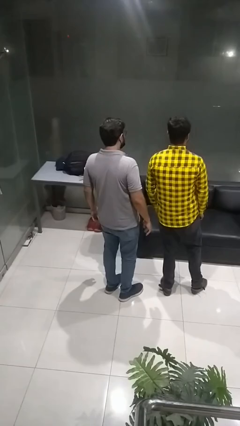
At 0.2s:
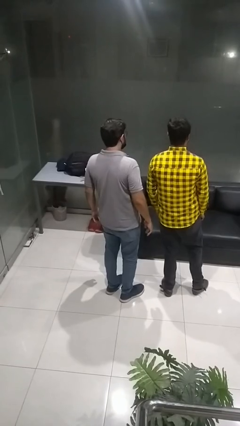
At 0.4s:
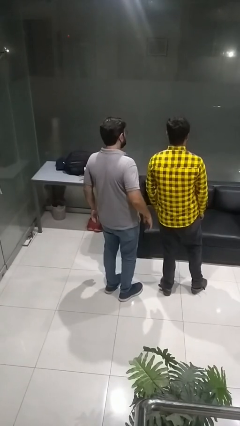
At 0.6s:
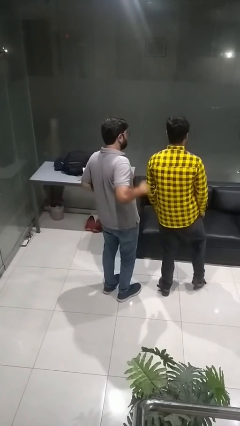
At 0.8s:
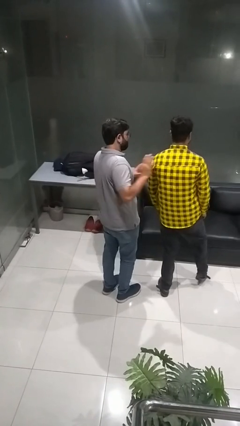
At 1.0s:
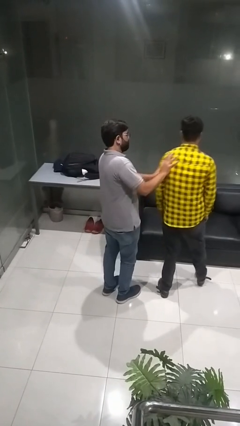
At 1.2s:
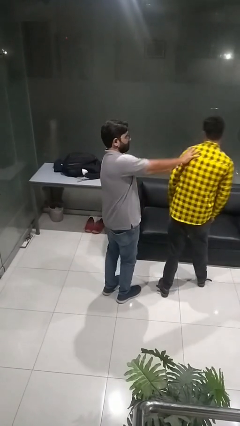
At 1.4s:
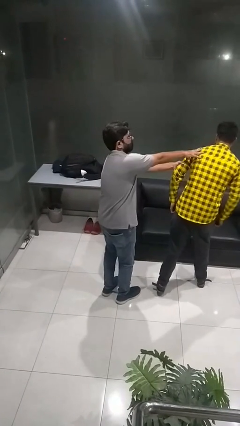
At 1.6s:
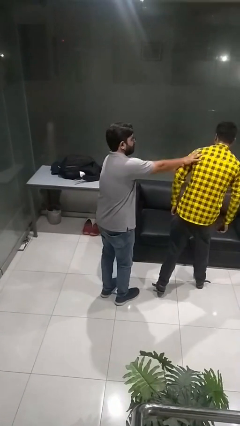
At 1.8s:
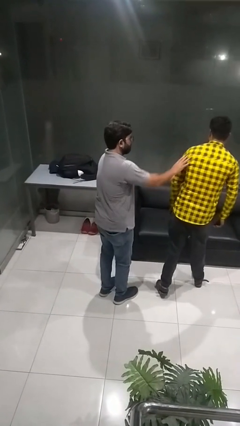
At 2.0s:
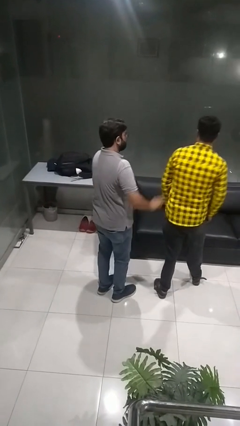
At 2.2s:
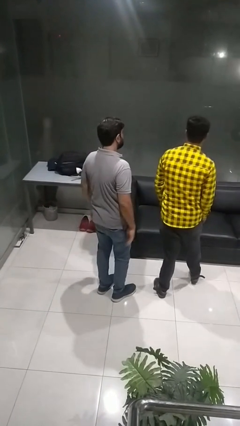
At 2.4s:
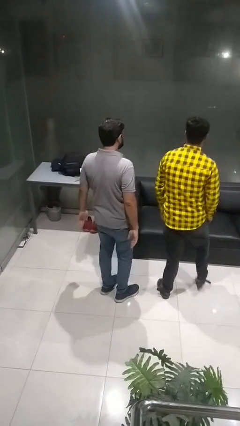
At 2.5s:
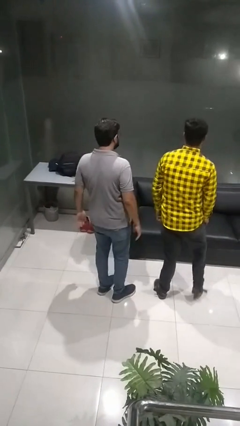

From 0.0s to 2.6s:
person shoves person

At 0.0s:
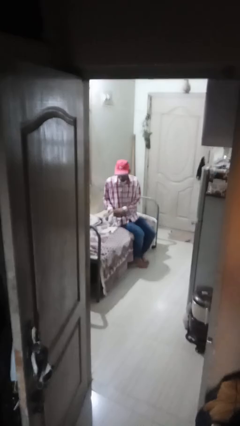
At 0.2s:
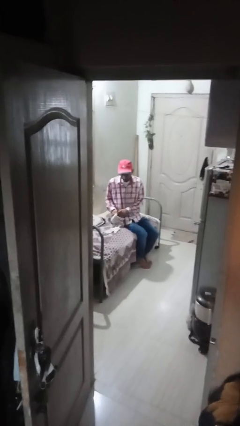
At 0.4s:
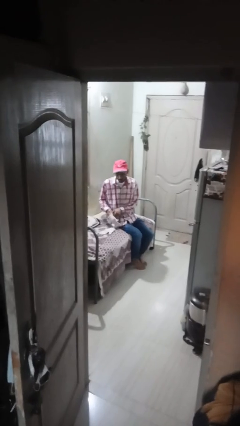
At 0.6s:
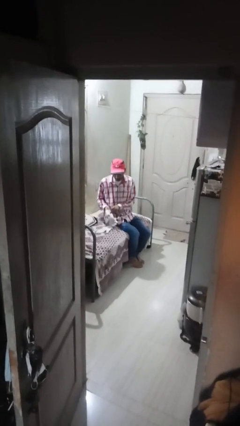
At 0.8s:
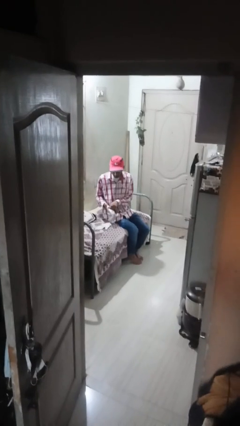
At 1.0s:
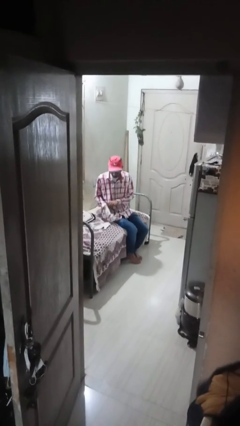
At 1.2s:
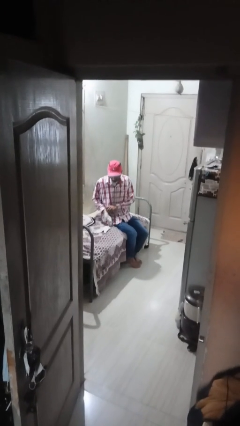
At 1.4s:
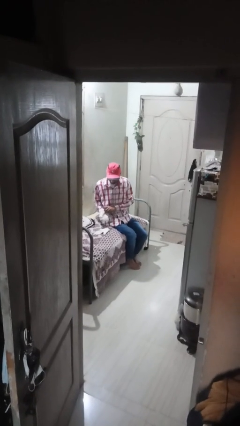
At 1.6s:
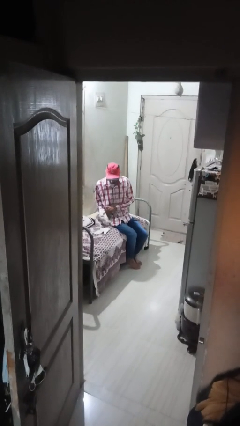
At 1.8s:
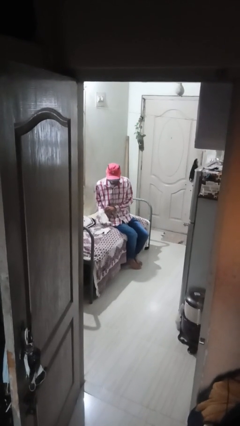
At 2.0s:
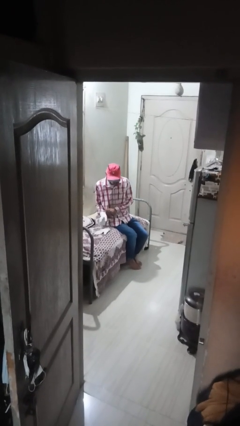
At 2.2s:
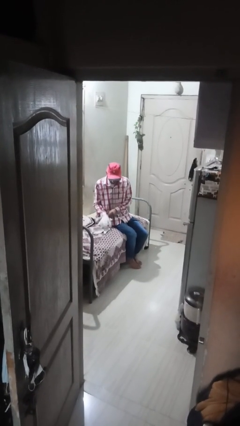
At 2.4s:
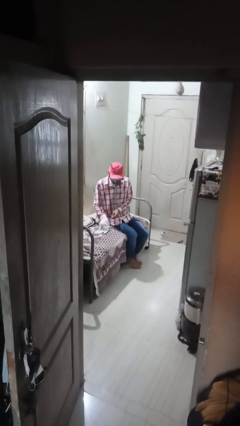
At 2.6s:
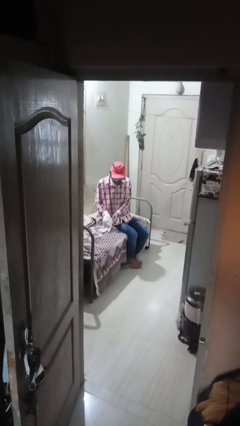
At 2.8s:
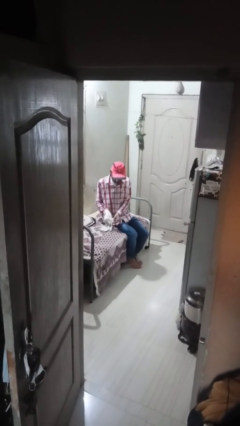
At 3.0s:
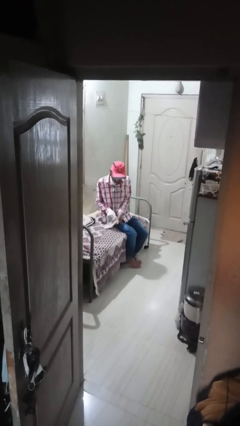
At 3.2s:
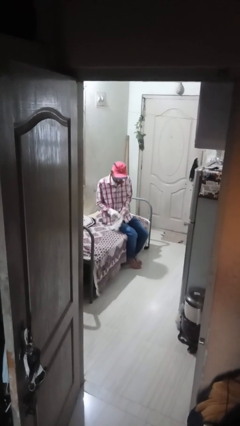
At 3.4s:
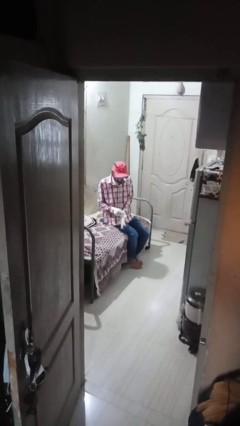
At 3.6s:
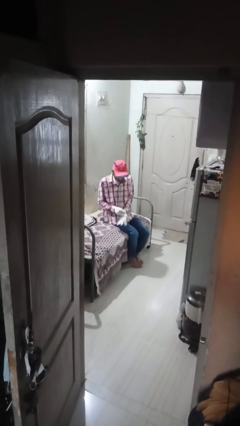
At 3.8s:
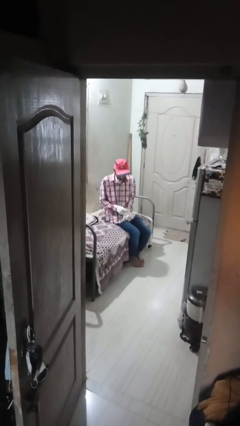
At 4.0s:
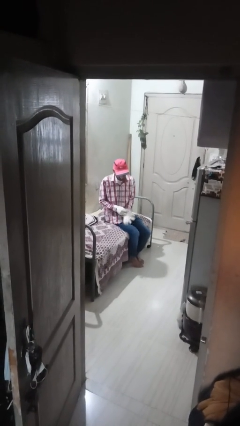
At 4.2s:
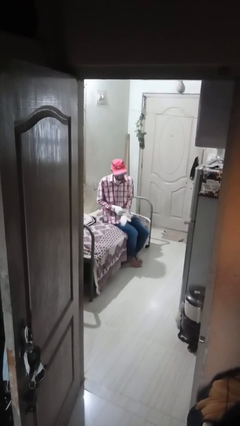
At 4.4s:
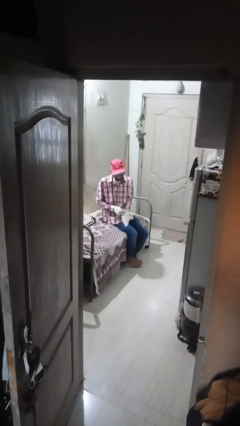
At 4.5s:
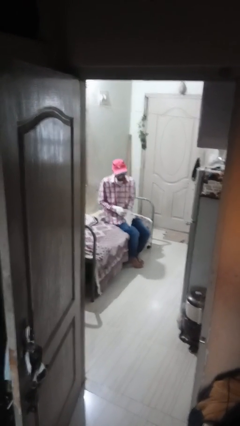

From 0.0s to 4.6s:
person puts on gloves

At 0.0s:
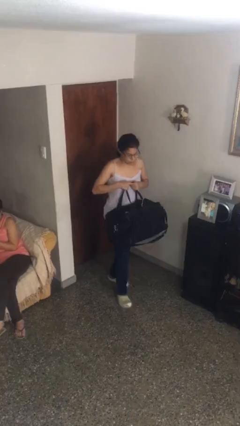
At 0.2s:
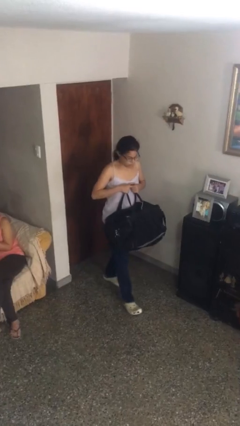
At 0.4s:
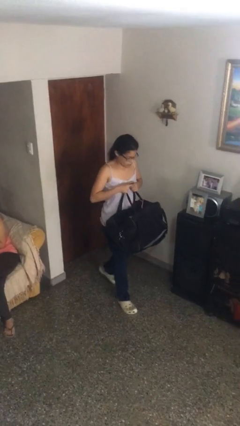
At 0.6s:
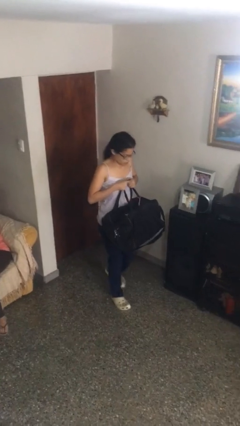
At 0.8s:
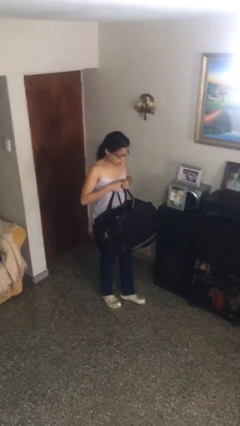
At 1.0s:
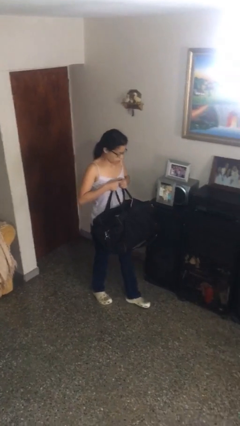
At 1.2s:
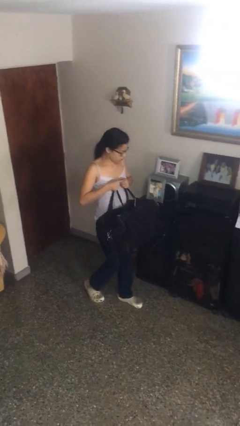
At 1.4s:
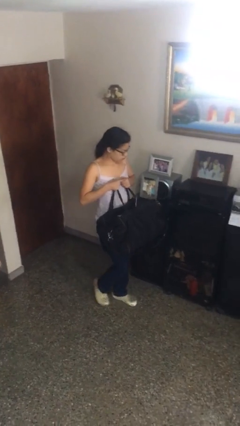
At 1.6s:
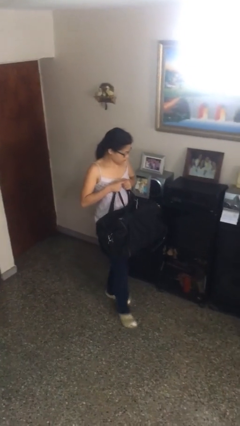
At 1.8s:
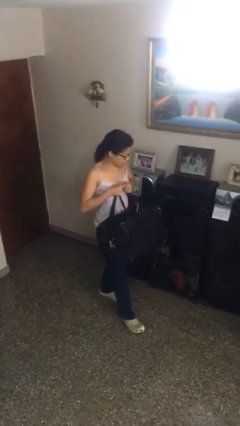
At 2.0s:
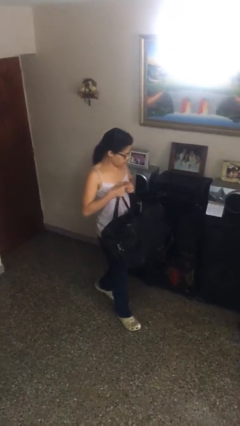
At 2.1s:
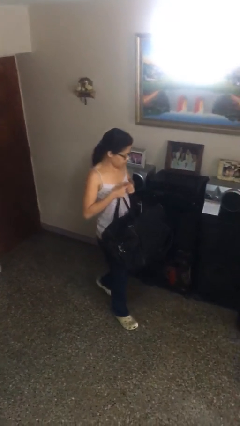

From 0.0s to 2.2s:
person carries heavy object

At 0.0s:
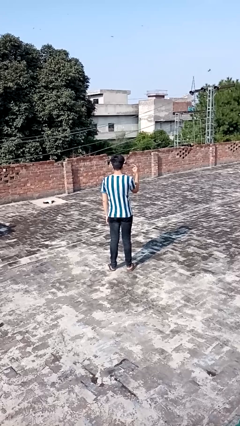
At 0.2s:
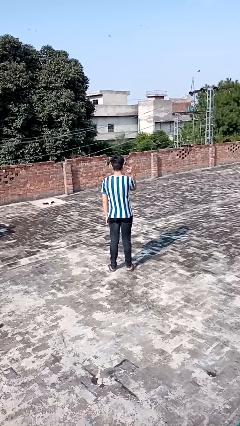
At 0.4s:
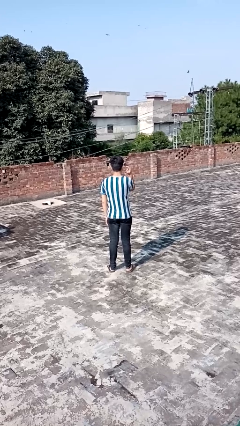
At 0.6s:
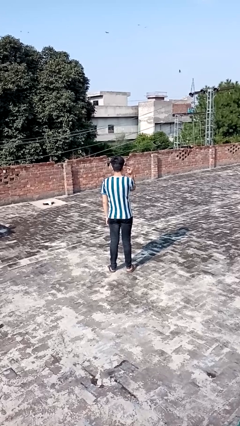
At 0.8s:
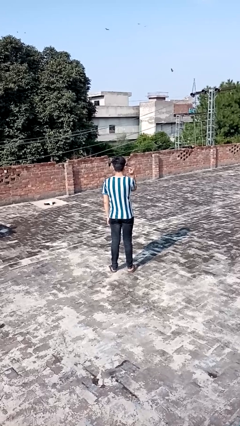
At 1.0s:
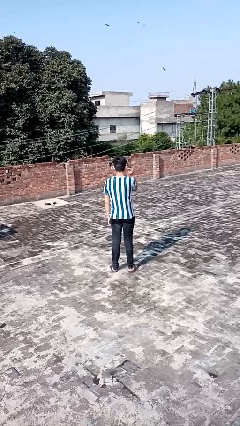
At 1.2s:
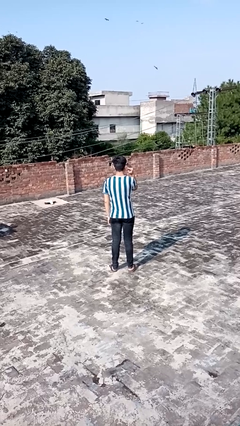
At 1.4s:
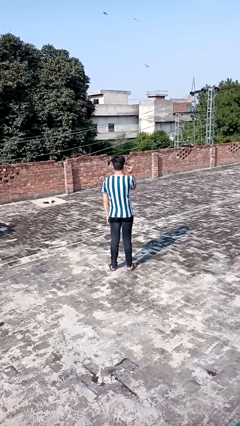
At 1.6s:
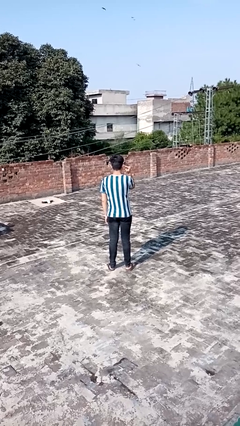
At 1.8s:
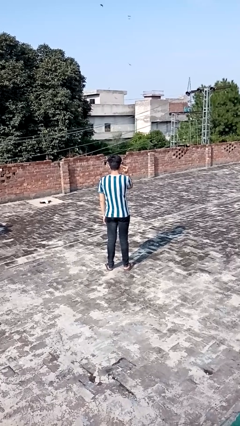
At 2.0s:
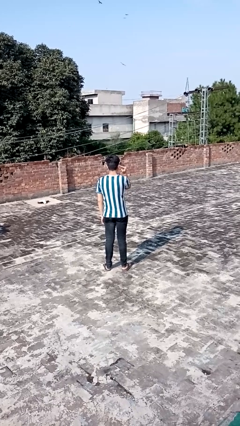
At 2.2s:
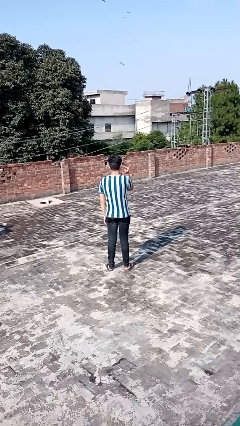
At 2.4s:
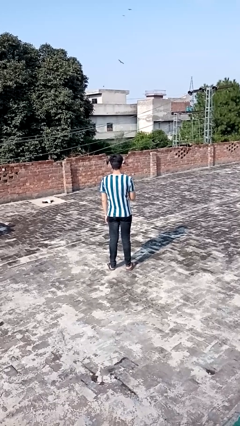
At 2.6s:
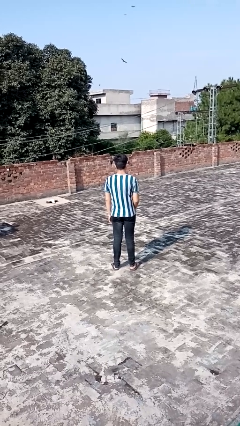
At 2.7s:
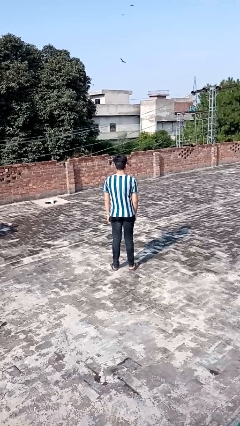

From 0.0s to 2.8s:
person gestures listen closely

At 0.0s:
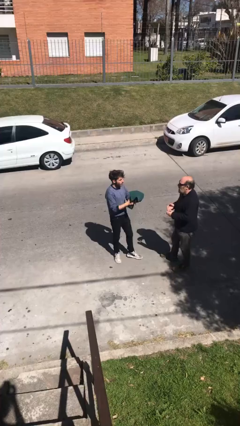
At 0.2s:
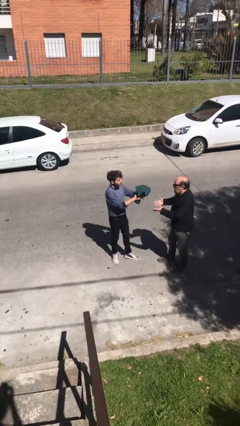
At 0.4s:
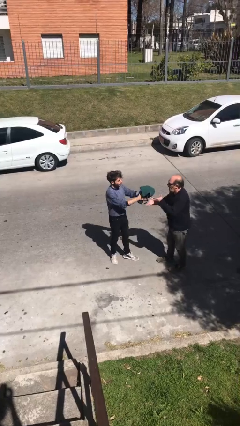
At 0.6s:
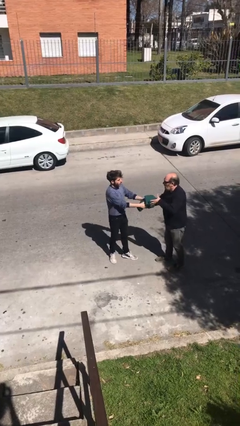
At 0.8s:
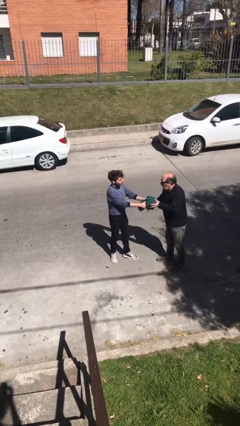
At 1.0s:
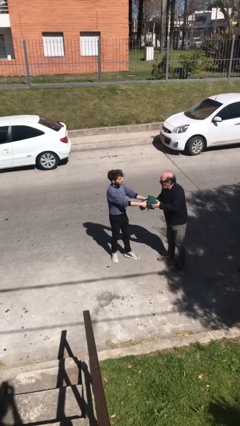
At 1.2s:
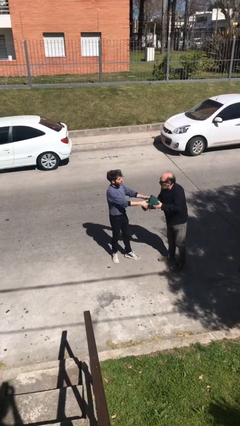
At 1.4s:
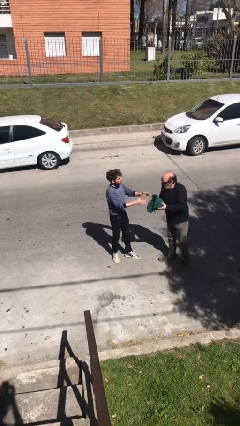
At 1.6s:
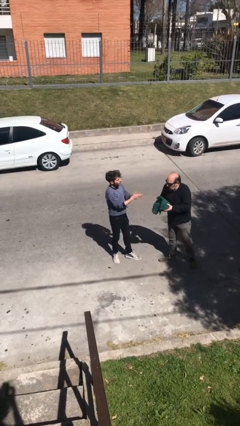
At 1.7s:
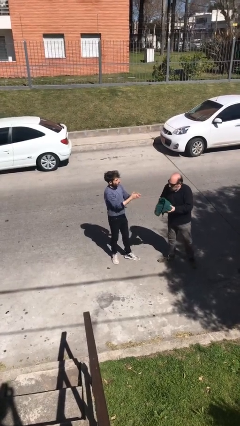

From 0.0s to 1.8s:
person transfers object to person

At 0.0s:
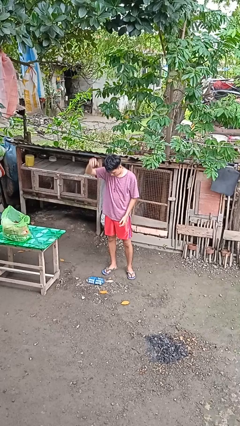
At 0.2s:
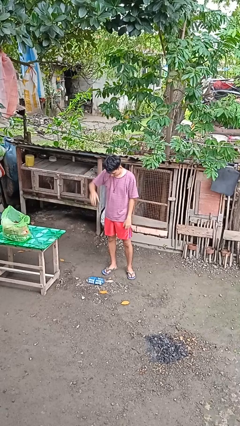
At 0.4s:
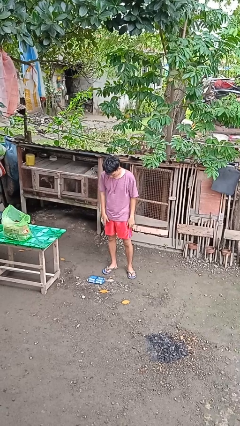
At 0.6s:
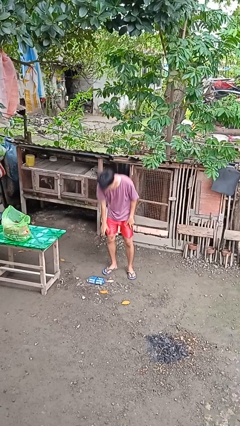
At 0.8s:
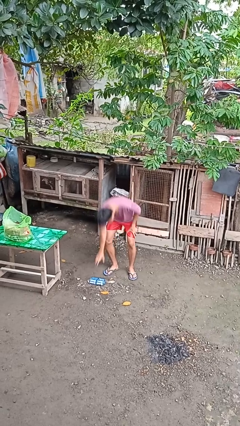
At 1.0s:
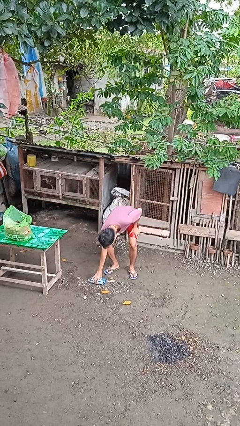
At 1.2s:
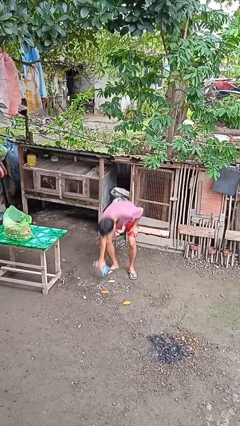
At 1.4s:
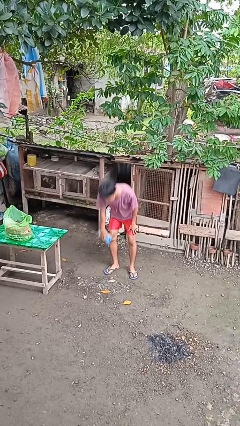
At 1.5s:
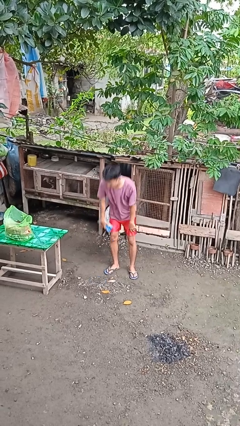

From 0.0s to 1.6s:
person picks up object from floor

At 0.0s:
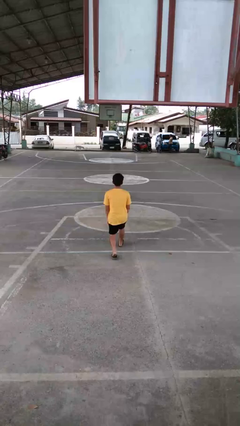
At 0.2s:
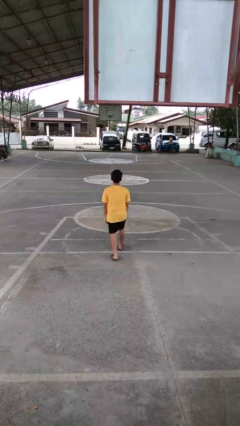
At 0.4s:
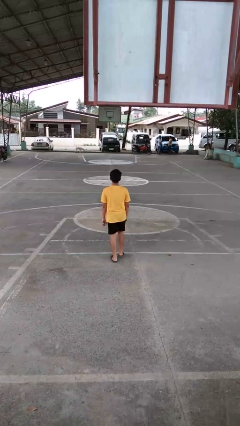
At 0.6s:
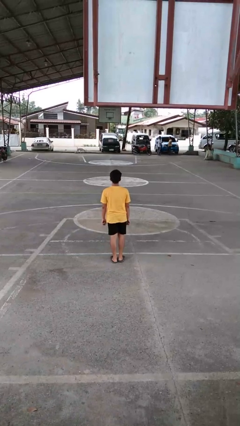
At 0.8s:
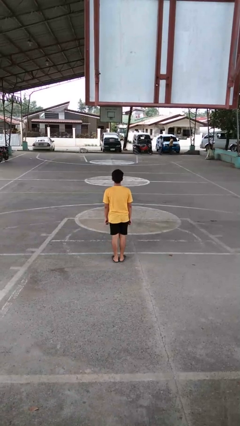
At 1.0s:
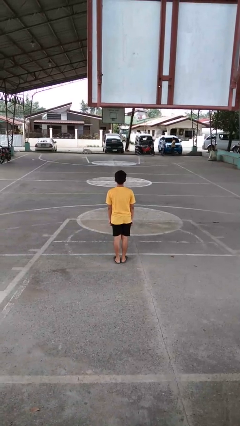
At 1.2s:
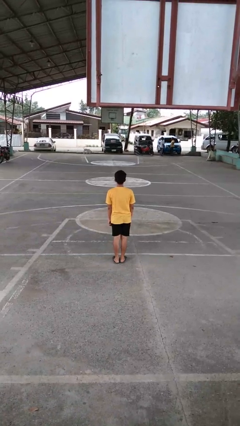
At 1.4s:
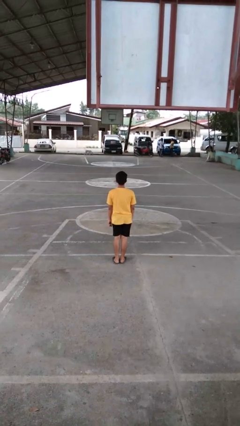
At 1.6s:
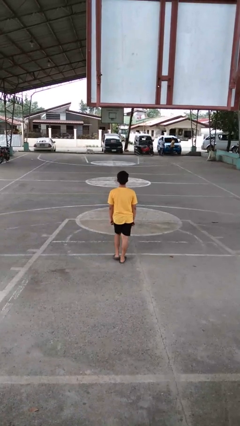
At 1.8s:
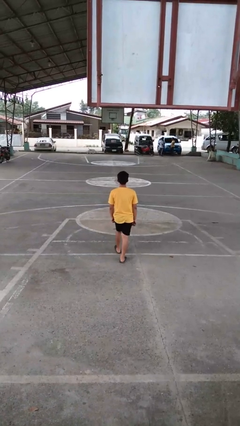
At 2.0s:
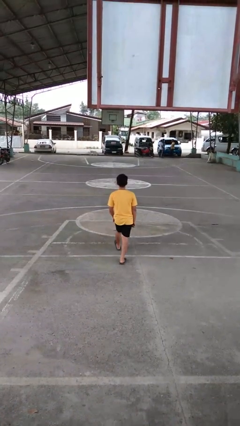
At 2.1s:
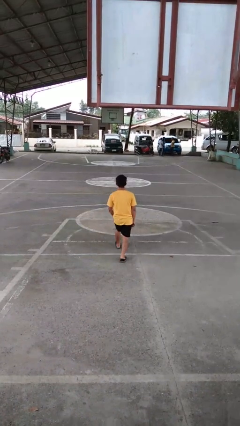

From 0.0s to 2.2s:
person stands up from floor
